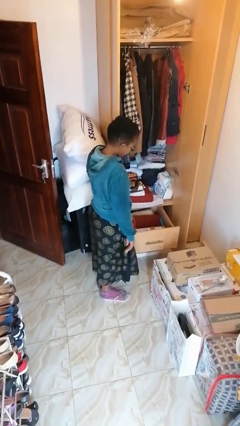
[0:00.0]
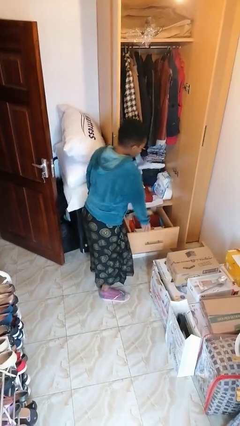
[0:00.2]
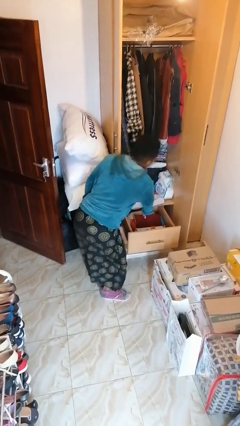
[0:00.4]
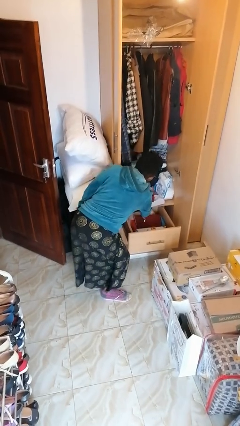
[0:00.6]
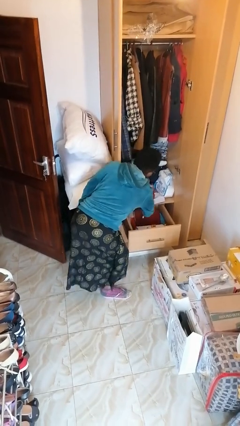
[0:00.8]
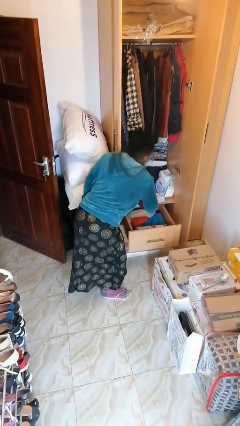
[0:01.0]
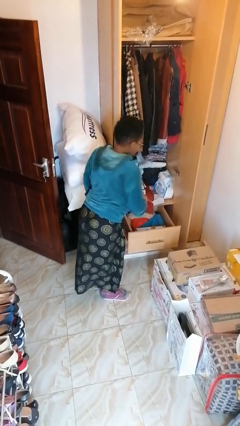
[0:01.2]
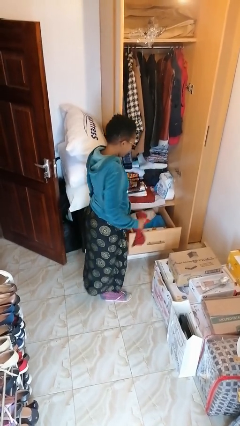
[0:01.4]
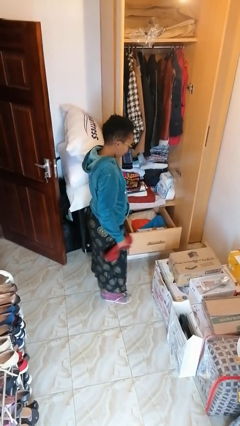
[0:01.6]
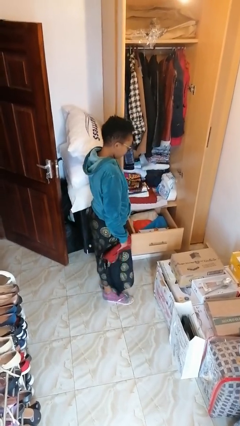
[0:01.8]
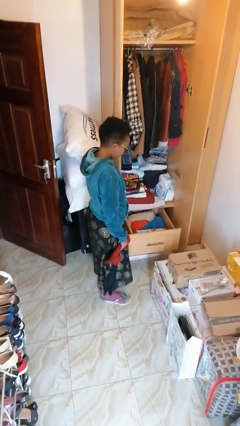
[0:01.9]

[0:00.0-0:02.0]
person takes clothes from dresser

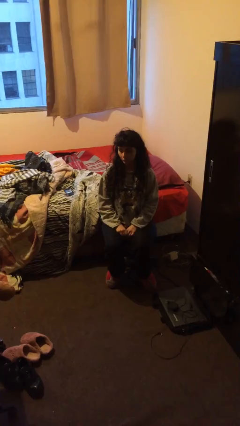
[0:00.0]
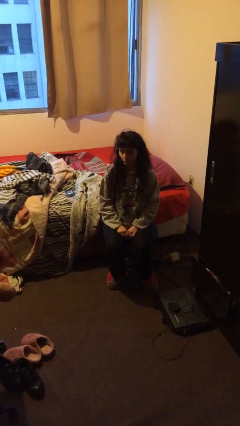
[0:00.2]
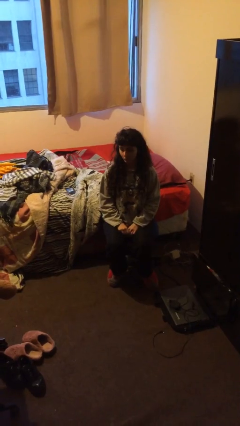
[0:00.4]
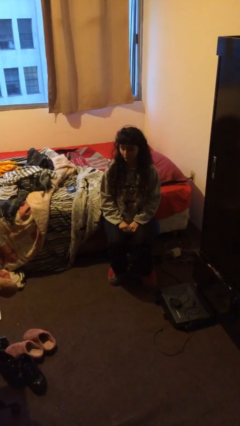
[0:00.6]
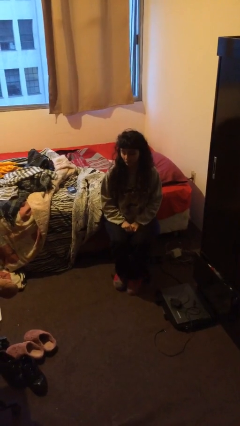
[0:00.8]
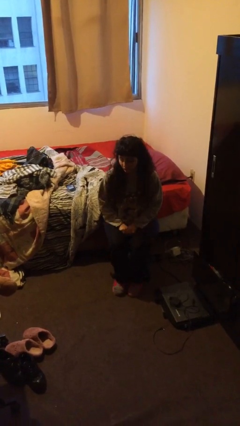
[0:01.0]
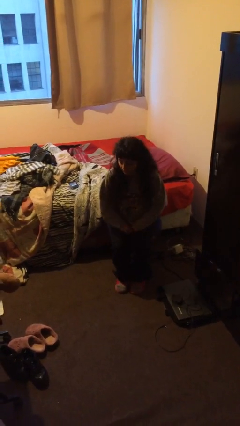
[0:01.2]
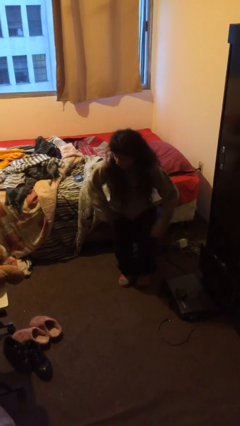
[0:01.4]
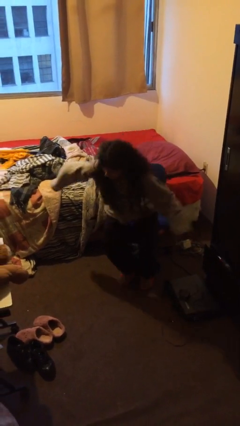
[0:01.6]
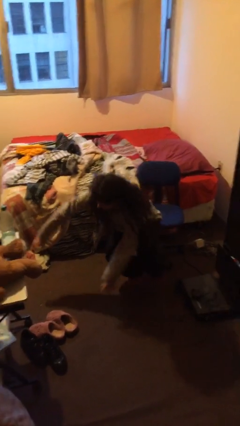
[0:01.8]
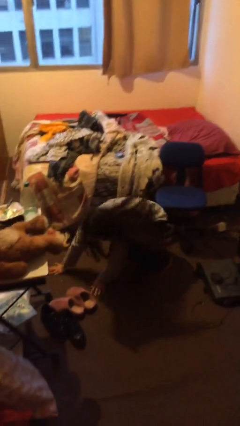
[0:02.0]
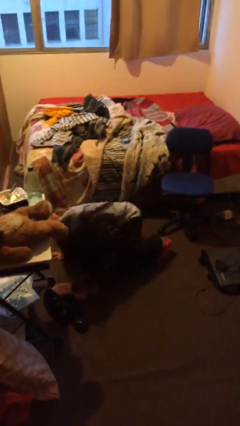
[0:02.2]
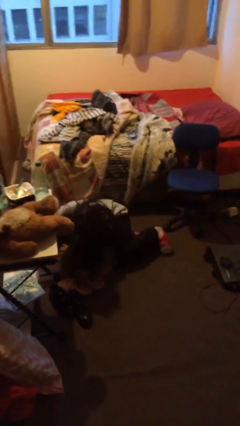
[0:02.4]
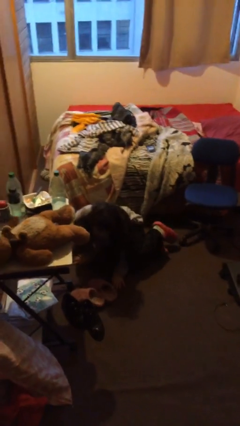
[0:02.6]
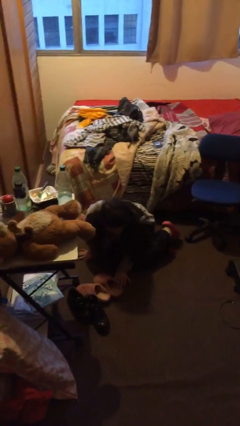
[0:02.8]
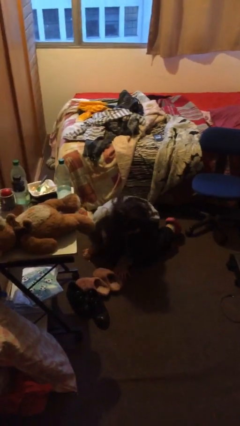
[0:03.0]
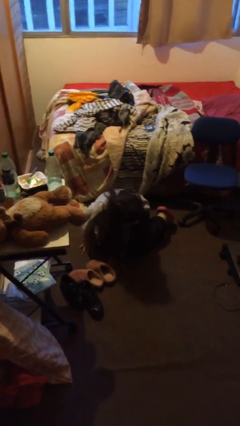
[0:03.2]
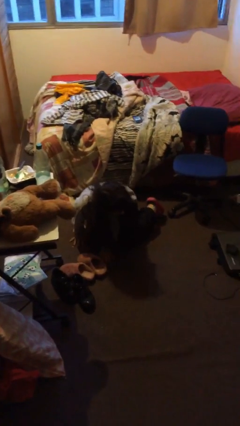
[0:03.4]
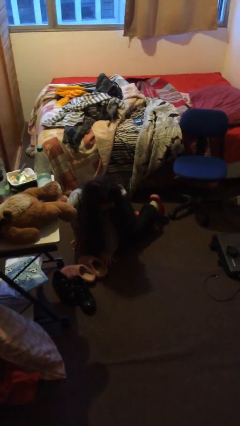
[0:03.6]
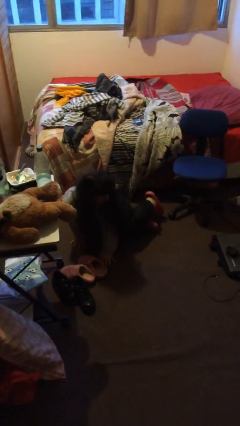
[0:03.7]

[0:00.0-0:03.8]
person falls from chair

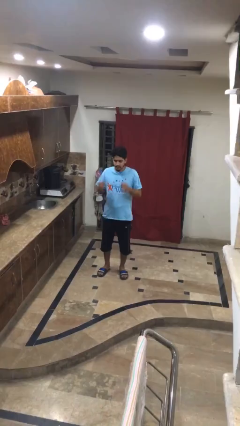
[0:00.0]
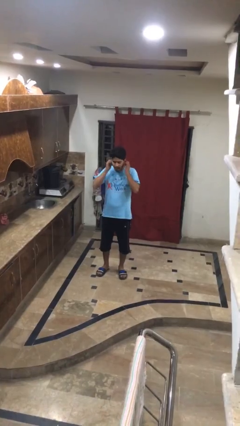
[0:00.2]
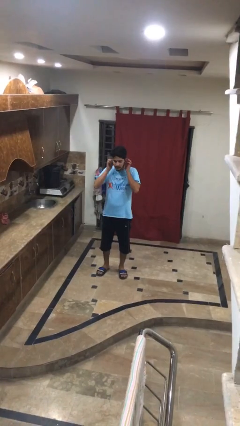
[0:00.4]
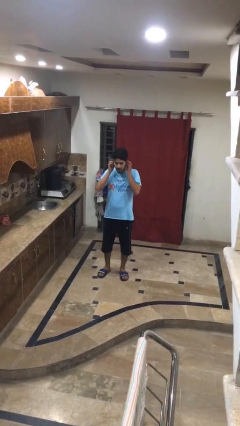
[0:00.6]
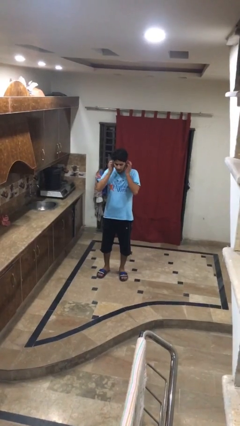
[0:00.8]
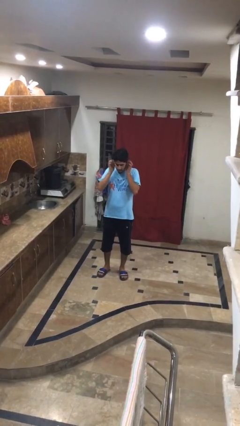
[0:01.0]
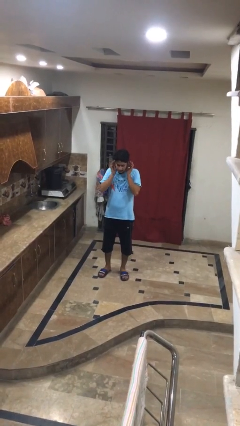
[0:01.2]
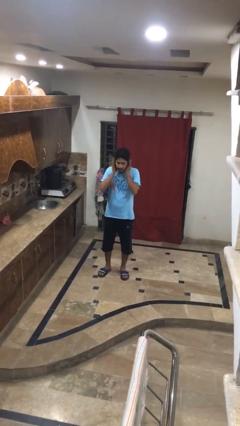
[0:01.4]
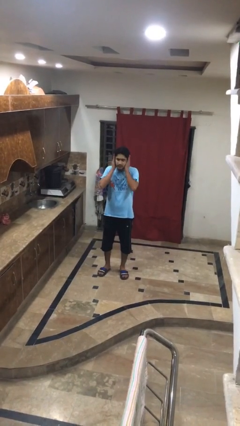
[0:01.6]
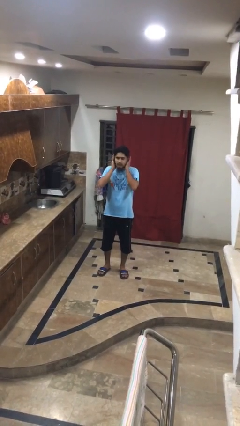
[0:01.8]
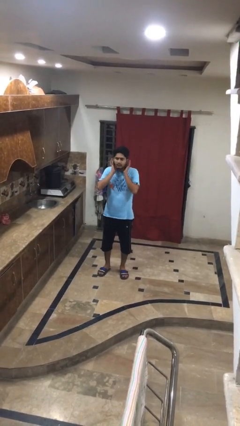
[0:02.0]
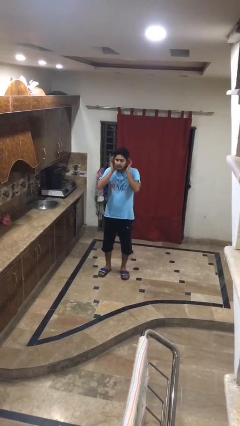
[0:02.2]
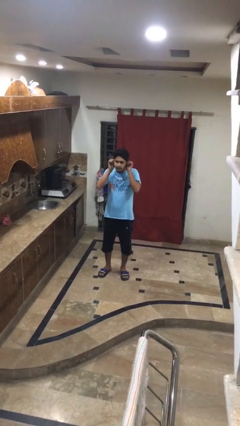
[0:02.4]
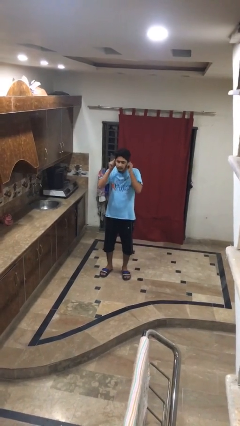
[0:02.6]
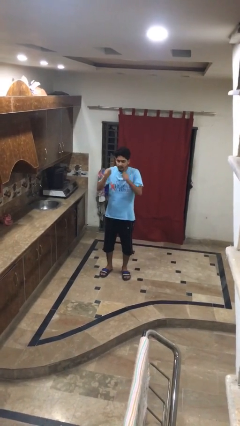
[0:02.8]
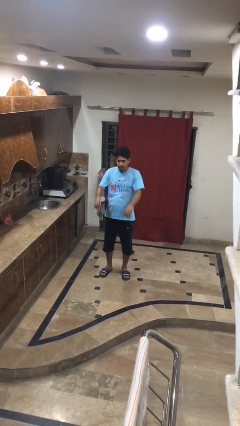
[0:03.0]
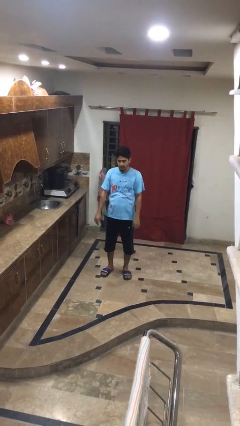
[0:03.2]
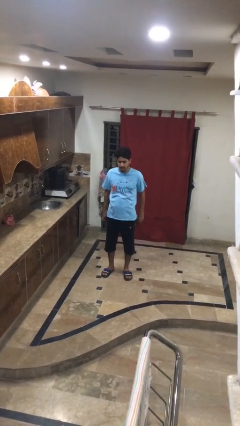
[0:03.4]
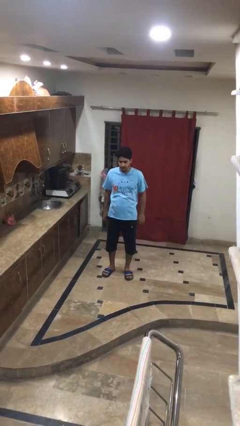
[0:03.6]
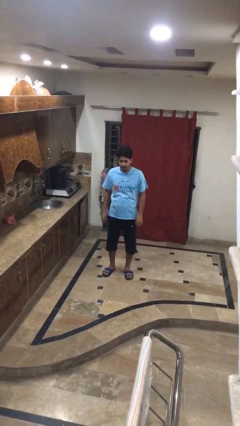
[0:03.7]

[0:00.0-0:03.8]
person touches earlobe

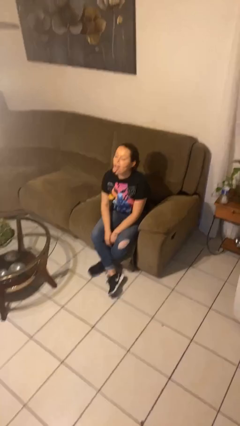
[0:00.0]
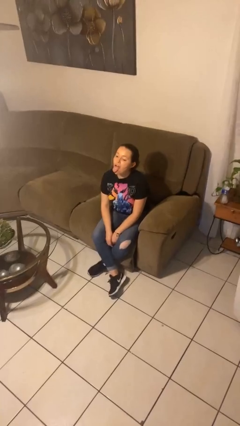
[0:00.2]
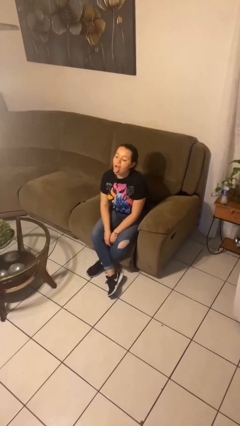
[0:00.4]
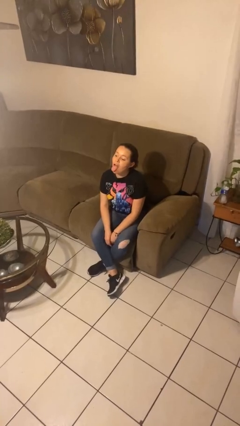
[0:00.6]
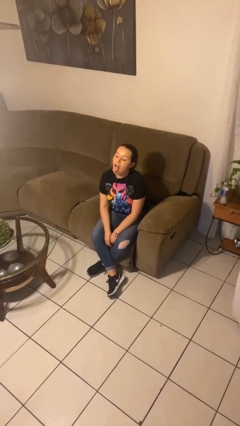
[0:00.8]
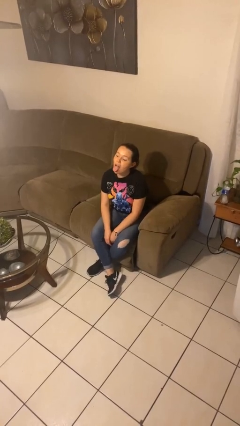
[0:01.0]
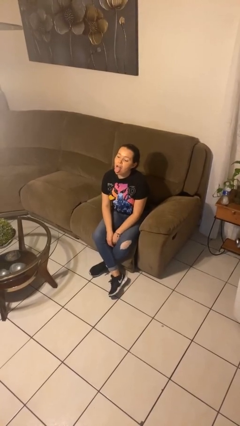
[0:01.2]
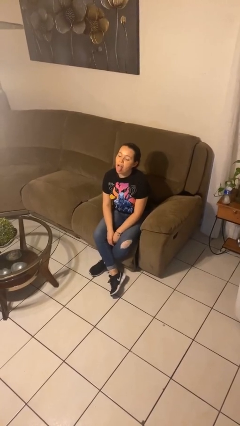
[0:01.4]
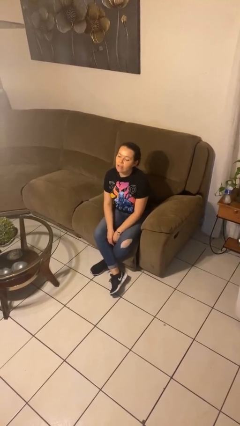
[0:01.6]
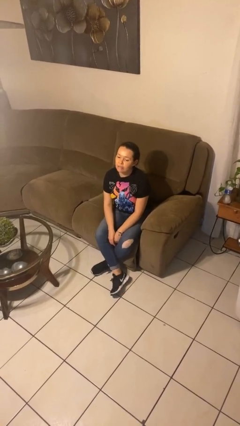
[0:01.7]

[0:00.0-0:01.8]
person sticks out tongue

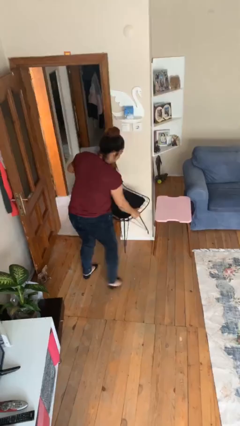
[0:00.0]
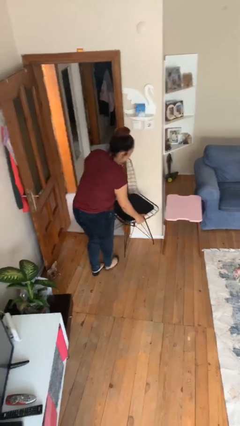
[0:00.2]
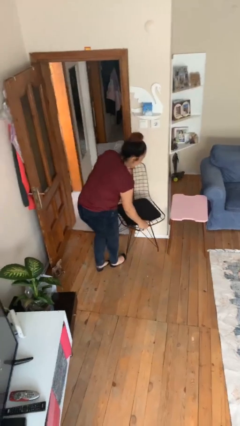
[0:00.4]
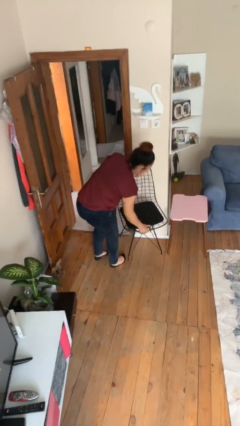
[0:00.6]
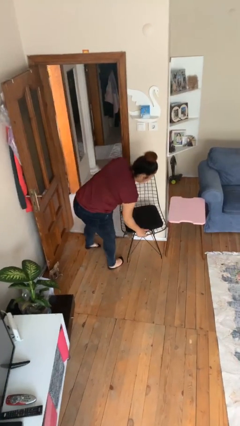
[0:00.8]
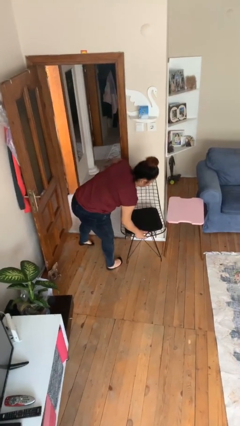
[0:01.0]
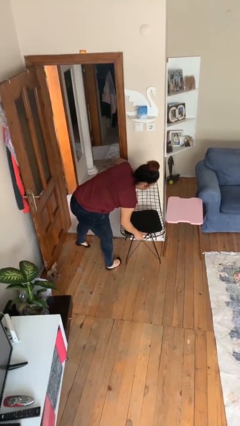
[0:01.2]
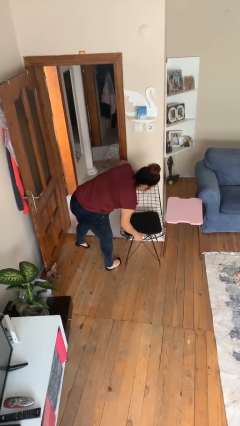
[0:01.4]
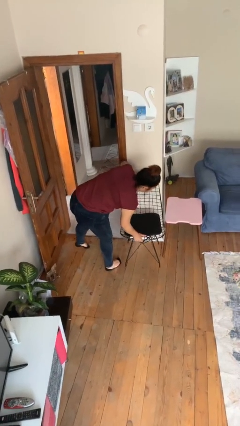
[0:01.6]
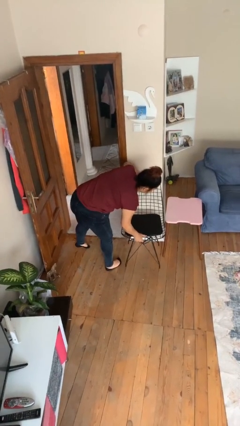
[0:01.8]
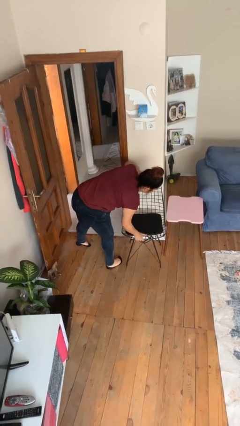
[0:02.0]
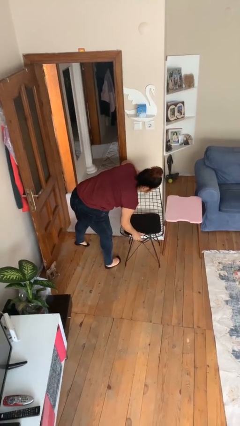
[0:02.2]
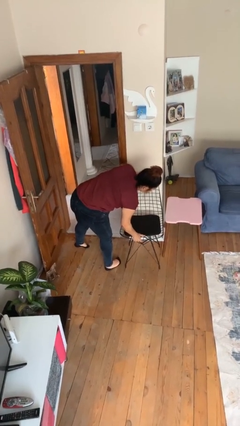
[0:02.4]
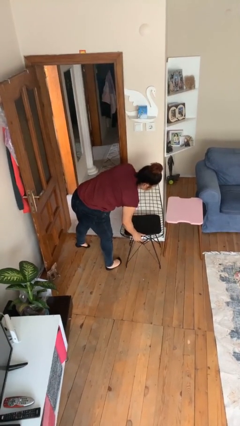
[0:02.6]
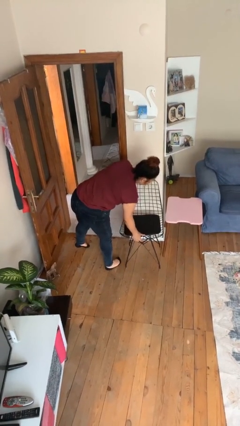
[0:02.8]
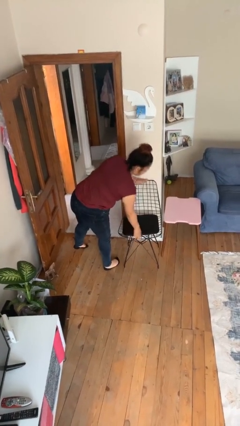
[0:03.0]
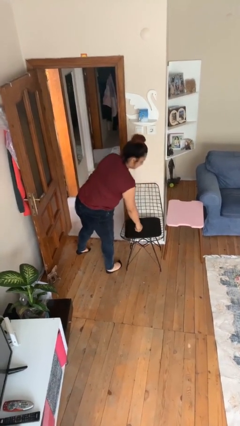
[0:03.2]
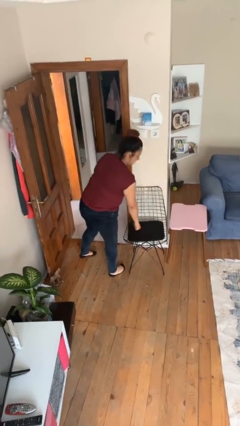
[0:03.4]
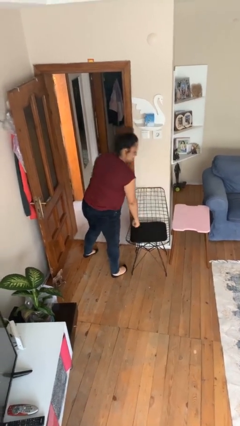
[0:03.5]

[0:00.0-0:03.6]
person puts down object on floor

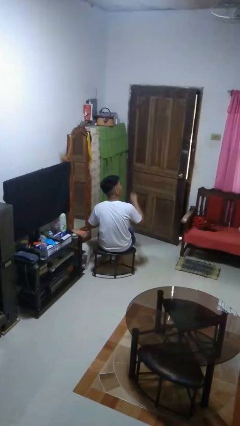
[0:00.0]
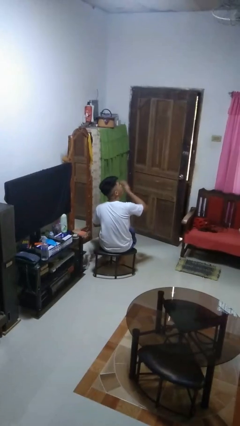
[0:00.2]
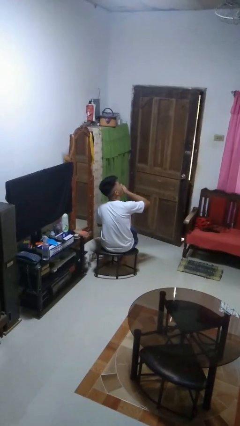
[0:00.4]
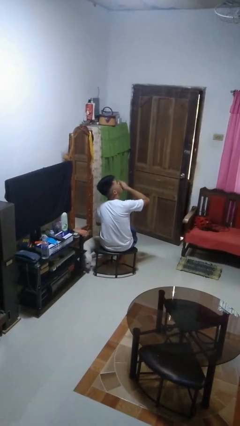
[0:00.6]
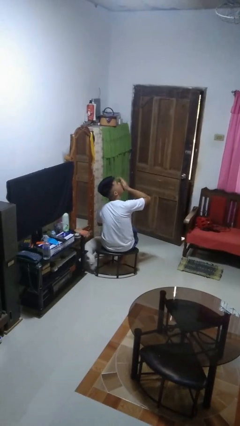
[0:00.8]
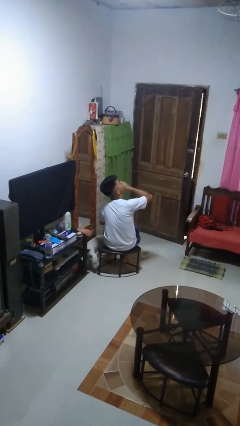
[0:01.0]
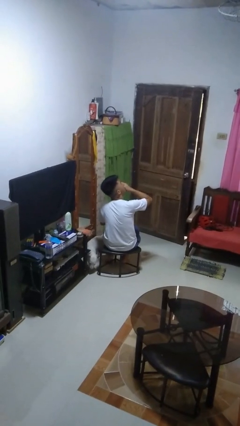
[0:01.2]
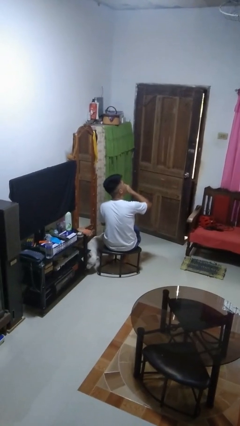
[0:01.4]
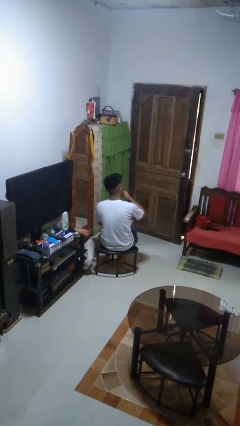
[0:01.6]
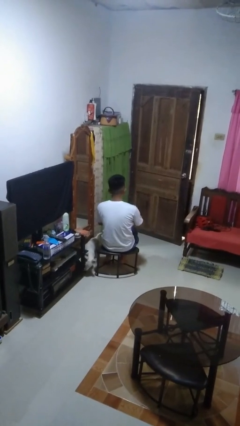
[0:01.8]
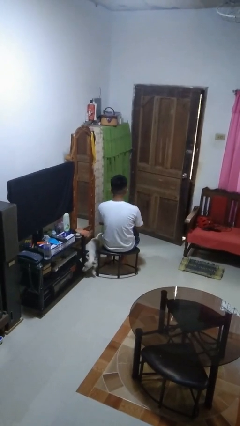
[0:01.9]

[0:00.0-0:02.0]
person yawns

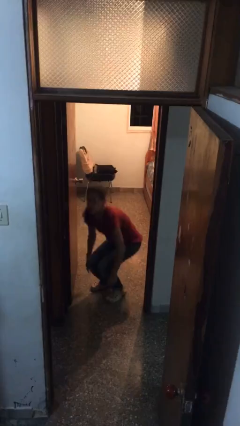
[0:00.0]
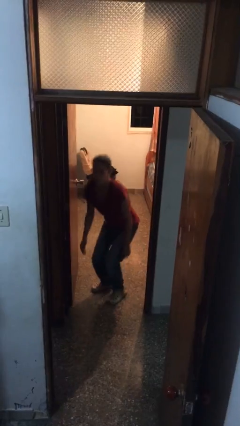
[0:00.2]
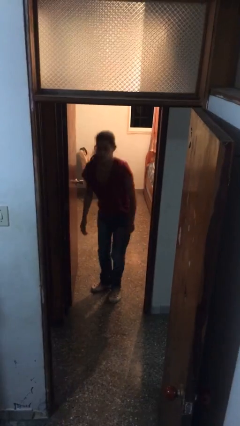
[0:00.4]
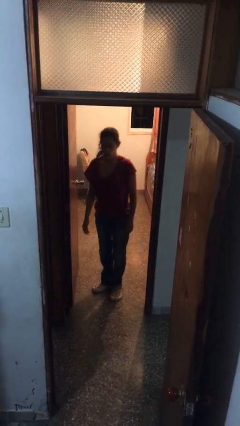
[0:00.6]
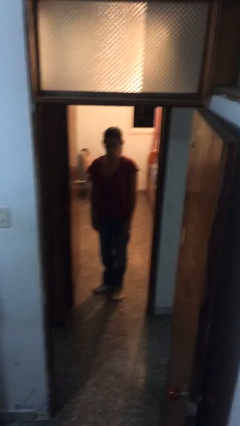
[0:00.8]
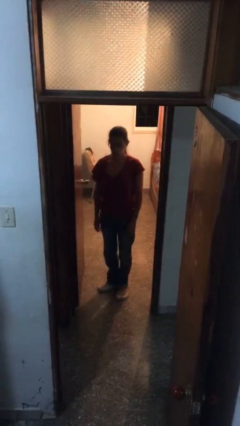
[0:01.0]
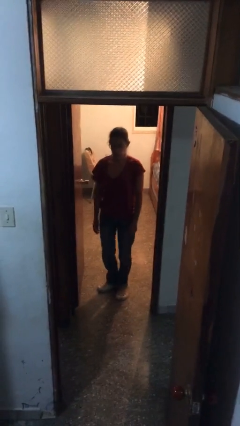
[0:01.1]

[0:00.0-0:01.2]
person stands up
